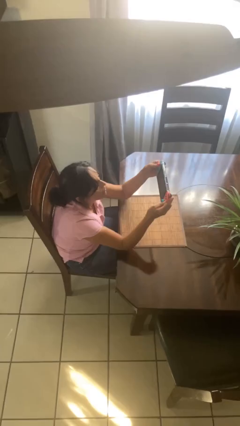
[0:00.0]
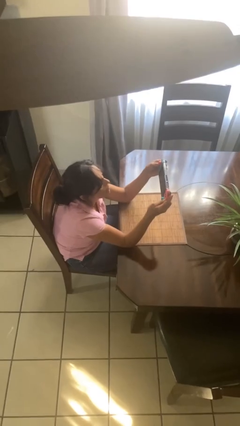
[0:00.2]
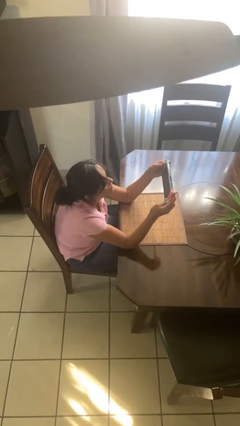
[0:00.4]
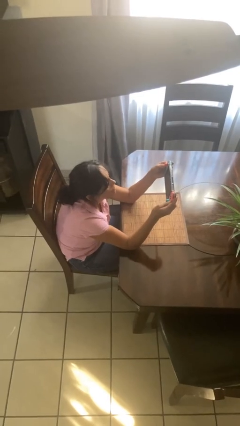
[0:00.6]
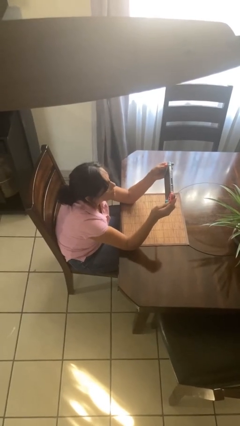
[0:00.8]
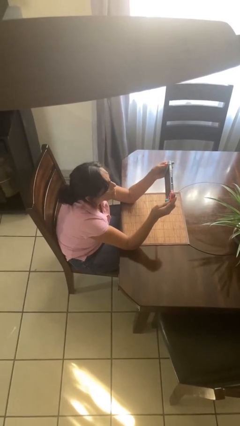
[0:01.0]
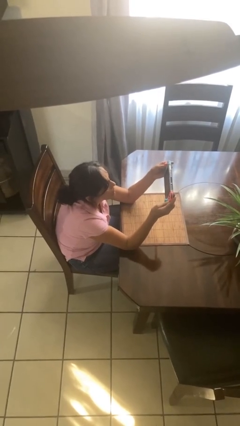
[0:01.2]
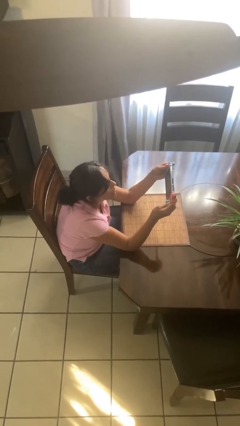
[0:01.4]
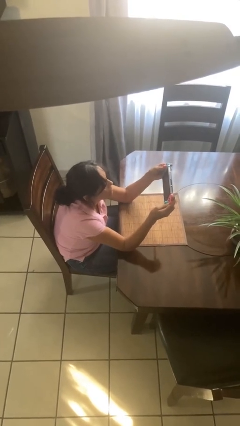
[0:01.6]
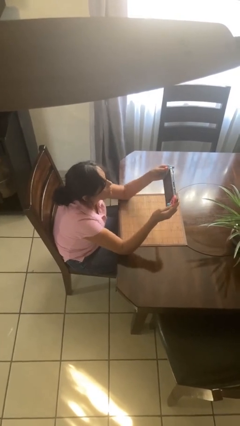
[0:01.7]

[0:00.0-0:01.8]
person interacts with handheld game

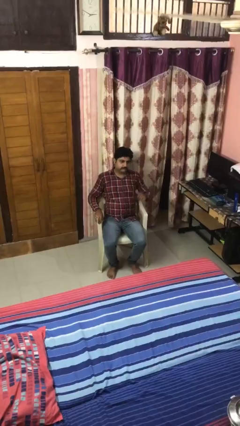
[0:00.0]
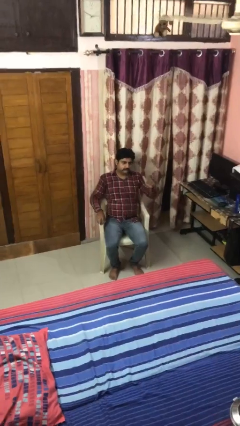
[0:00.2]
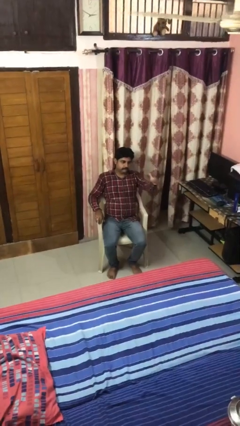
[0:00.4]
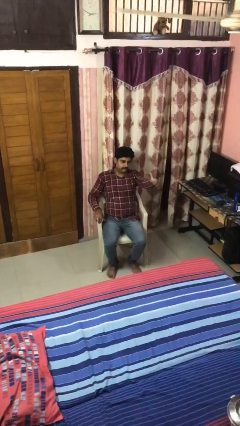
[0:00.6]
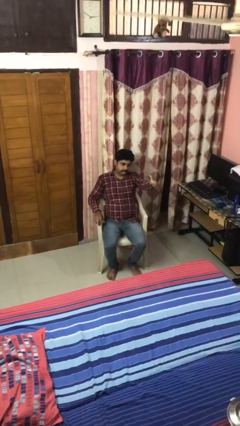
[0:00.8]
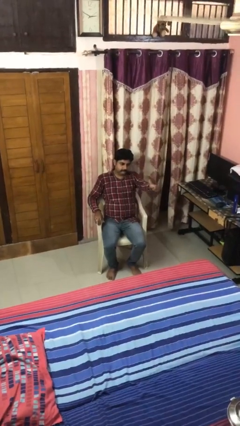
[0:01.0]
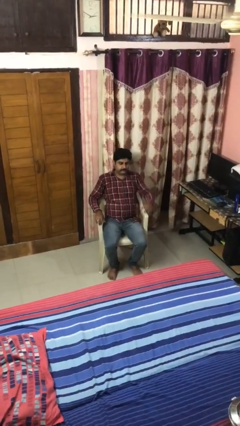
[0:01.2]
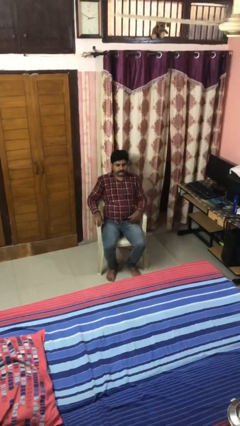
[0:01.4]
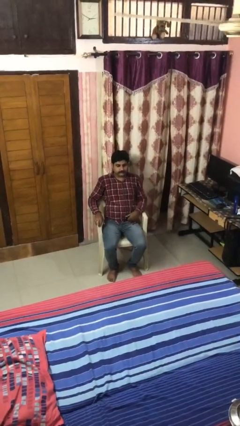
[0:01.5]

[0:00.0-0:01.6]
person gestures thumbs up

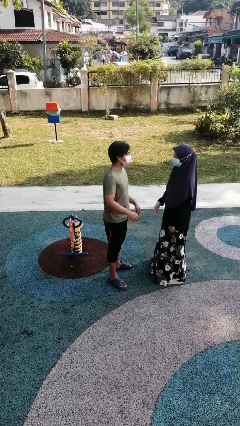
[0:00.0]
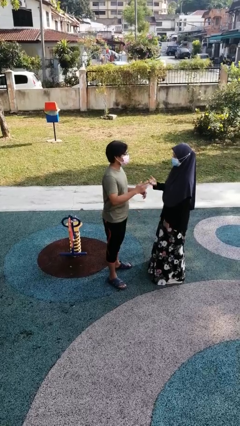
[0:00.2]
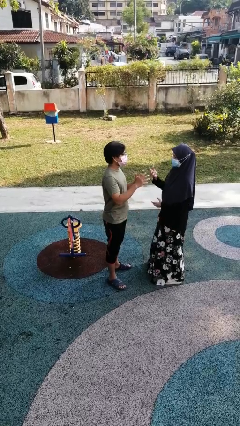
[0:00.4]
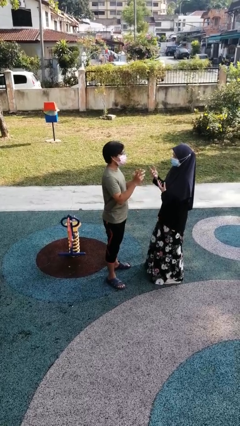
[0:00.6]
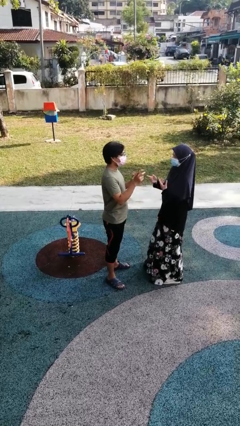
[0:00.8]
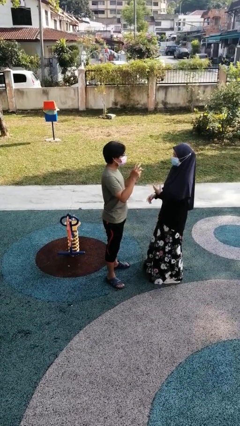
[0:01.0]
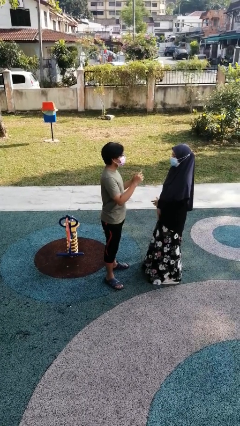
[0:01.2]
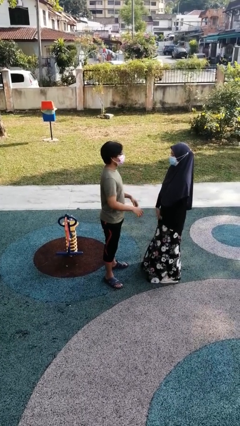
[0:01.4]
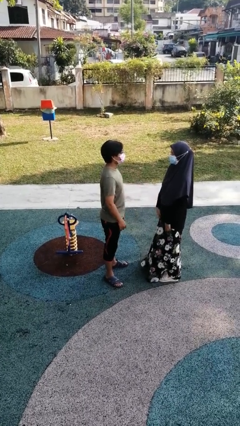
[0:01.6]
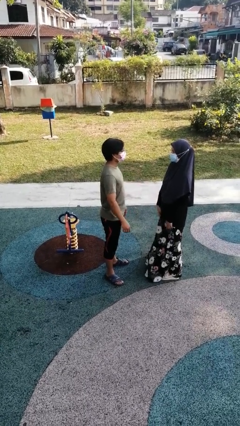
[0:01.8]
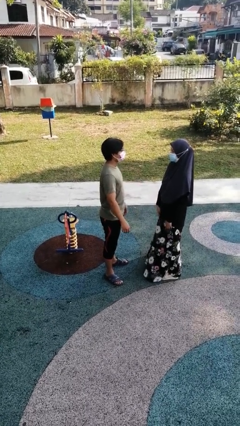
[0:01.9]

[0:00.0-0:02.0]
person talks to person

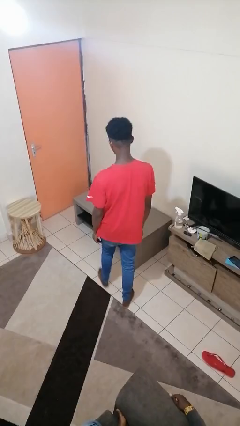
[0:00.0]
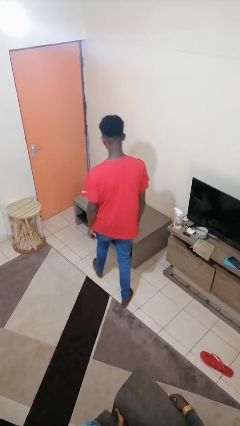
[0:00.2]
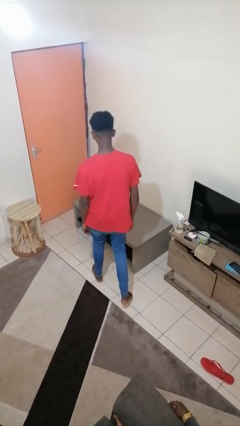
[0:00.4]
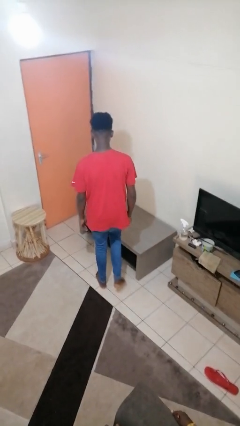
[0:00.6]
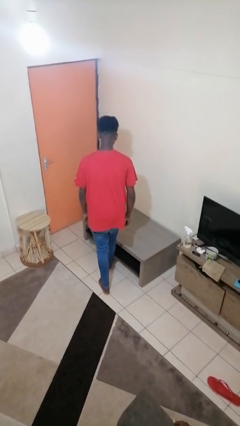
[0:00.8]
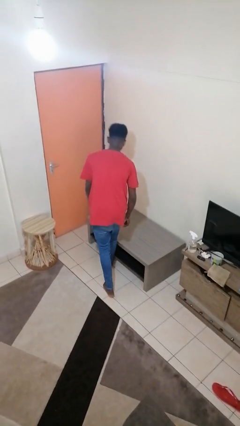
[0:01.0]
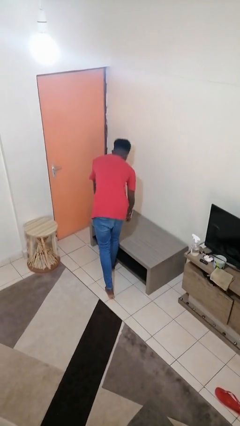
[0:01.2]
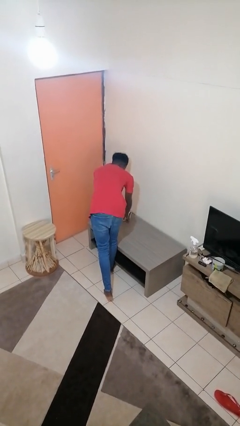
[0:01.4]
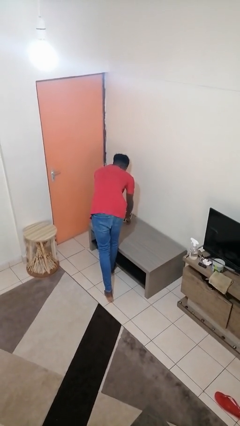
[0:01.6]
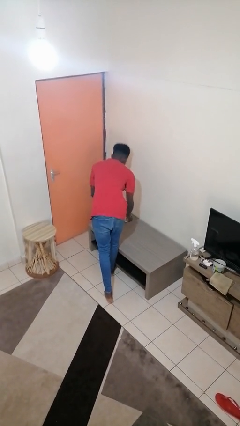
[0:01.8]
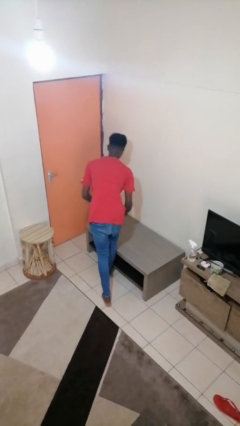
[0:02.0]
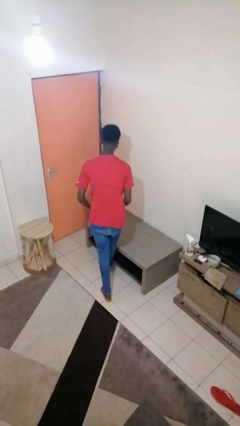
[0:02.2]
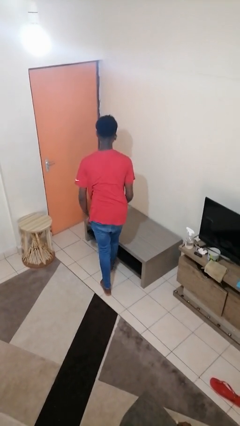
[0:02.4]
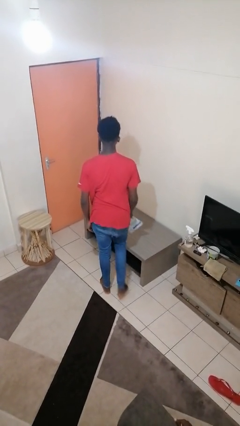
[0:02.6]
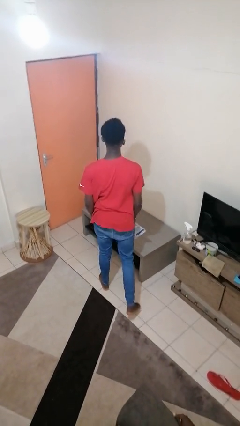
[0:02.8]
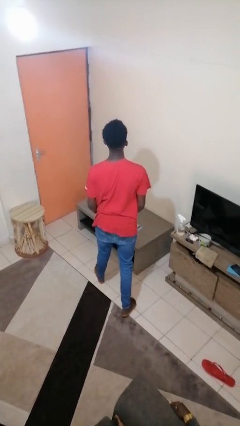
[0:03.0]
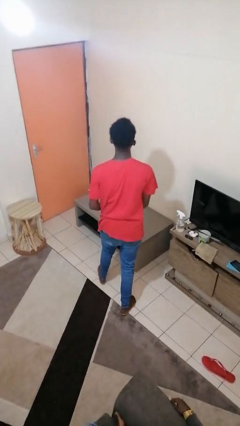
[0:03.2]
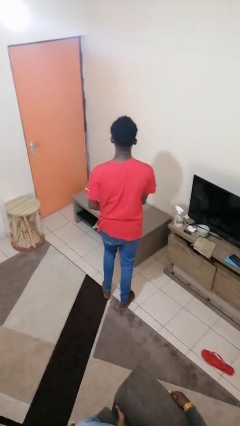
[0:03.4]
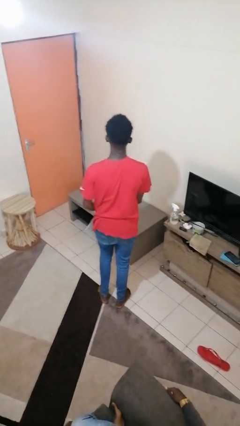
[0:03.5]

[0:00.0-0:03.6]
person picks up object from table

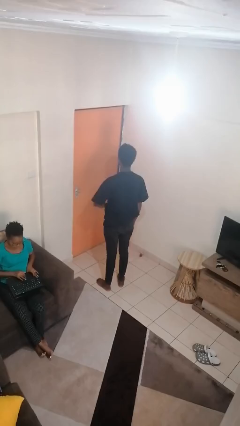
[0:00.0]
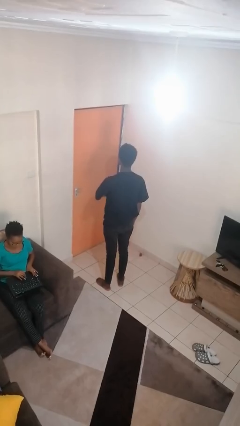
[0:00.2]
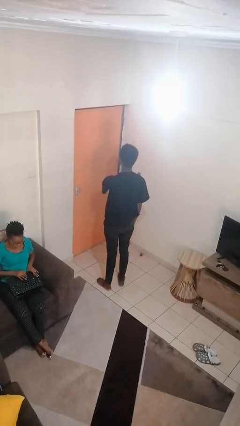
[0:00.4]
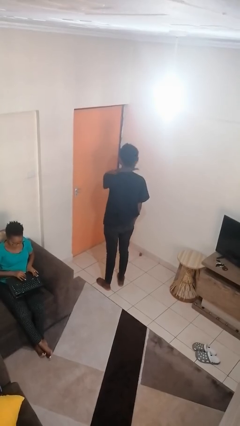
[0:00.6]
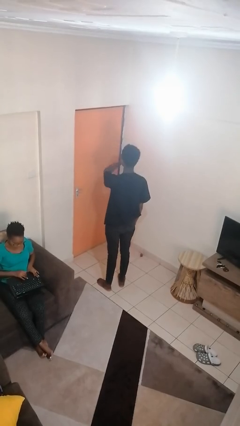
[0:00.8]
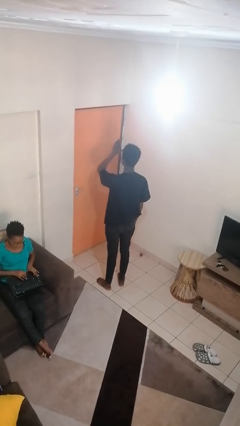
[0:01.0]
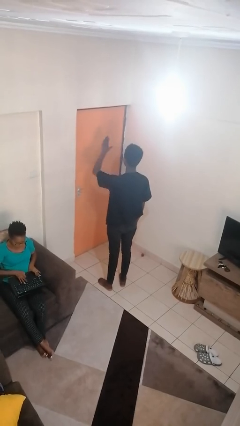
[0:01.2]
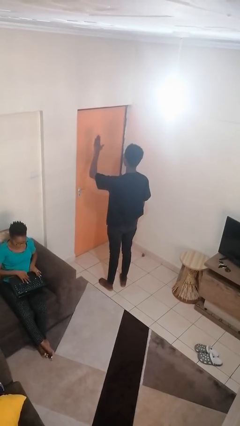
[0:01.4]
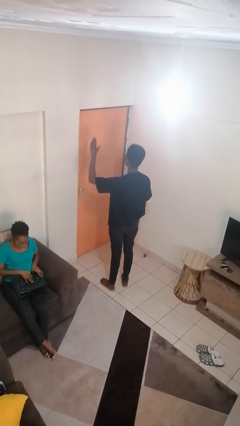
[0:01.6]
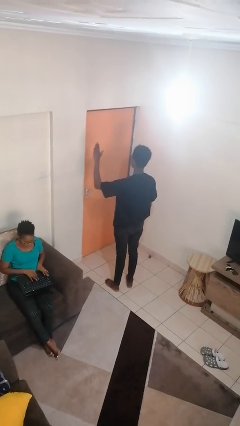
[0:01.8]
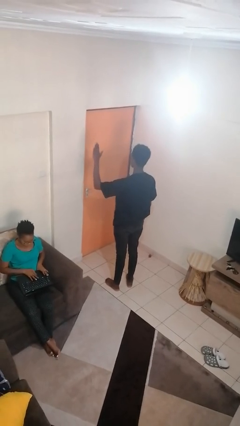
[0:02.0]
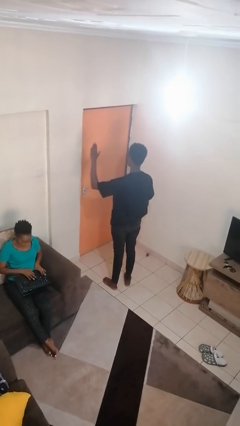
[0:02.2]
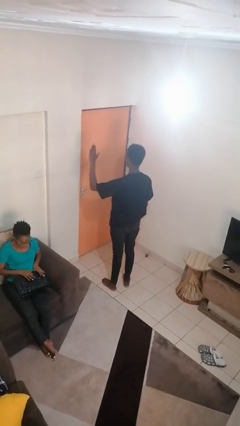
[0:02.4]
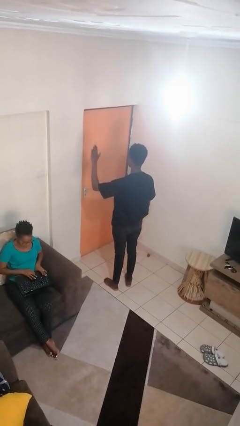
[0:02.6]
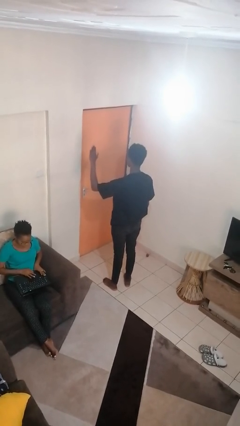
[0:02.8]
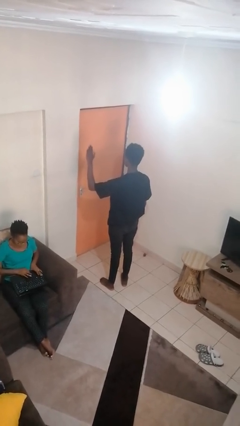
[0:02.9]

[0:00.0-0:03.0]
person gestures swipe left

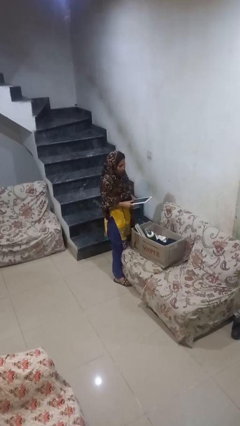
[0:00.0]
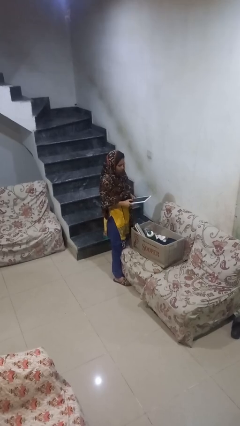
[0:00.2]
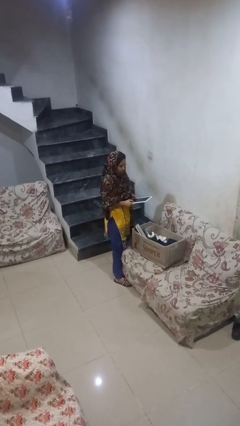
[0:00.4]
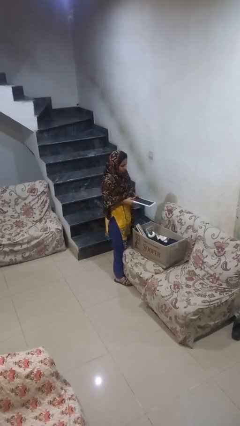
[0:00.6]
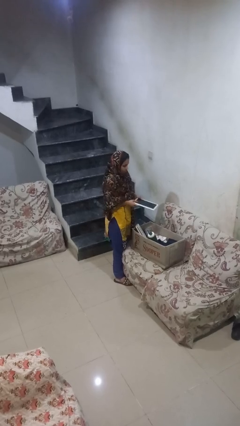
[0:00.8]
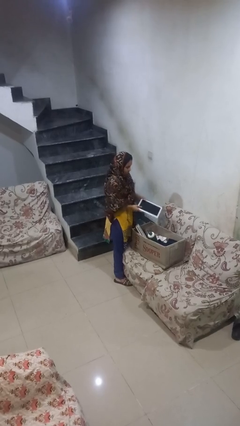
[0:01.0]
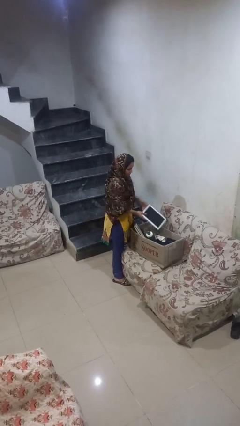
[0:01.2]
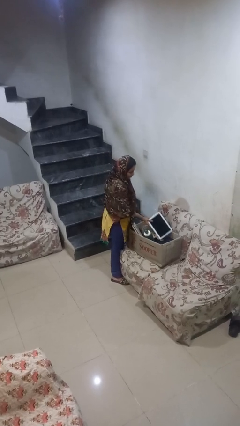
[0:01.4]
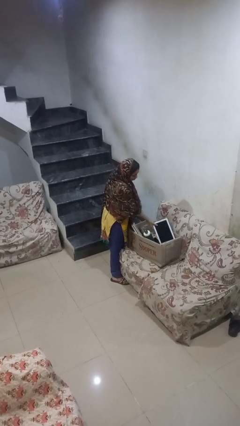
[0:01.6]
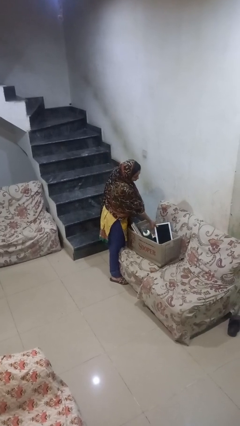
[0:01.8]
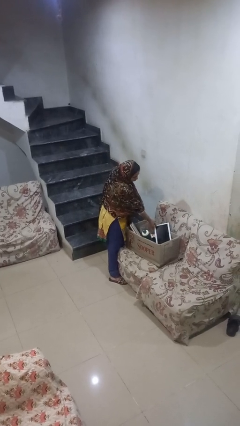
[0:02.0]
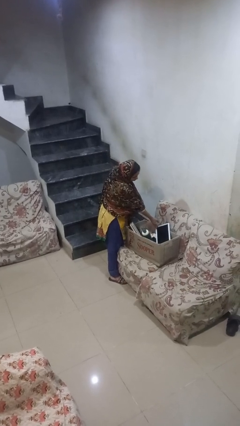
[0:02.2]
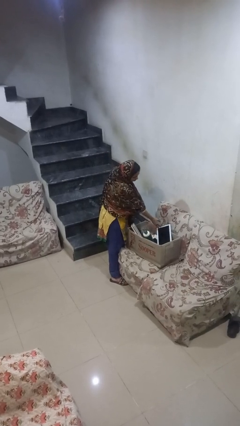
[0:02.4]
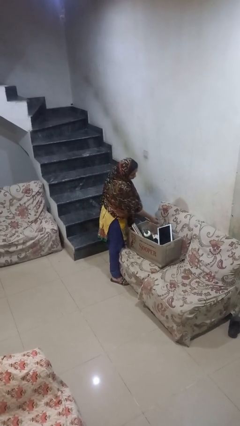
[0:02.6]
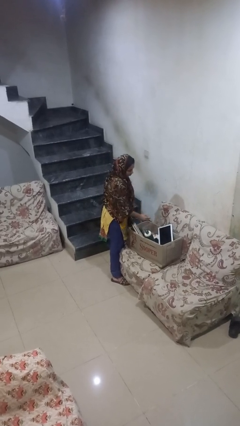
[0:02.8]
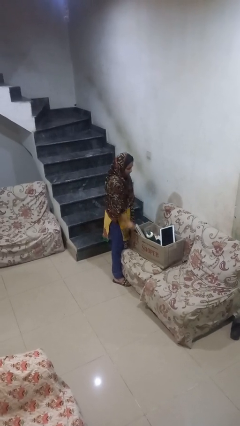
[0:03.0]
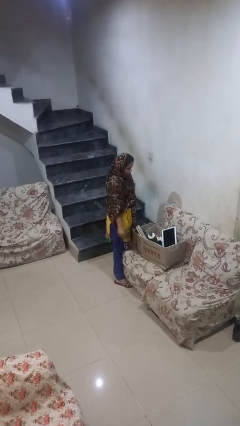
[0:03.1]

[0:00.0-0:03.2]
person puts object into box

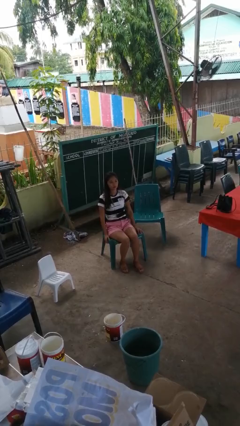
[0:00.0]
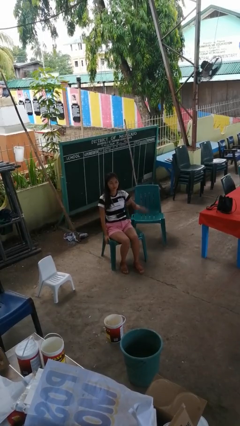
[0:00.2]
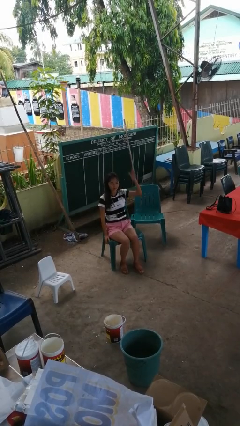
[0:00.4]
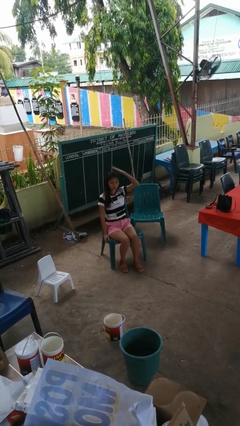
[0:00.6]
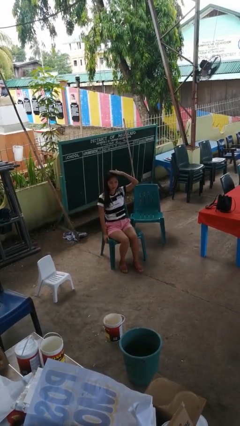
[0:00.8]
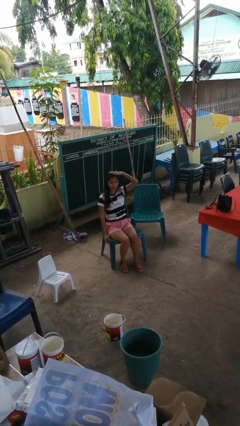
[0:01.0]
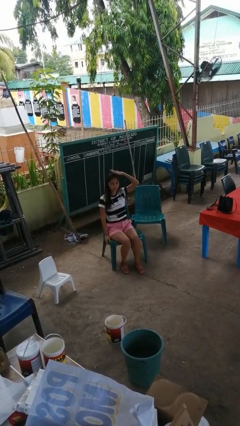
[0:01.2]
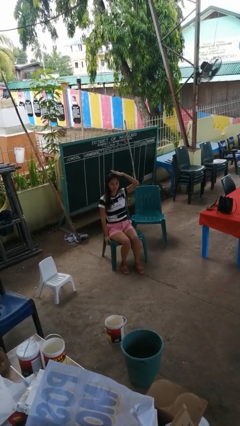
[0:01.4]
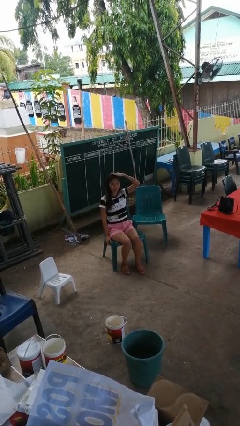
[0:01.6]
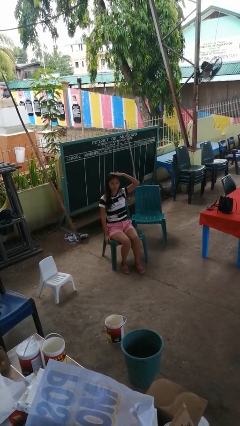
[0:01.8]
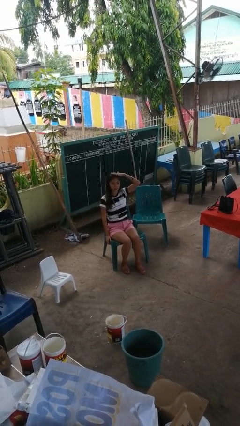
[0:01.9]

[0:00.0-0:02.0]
person pats head
